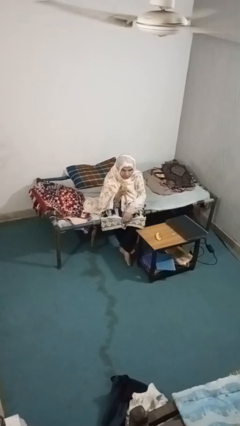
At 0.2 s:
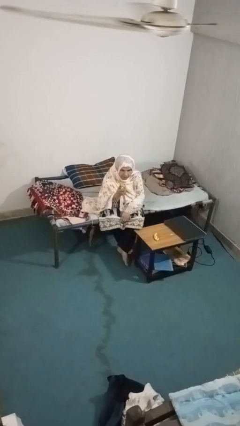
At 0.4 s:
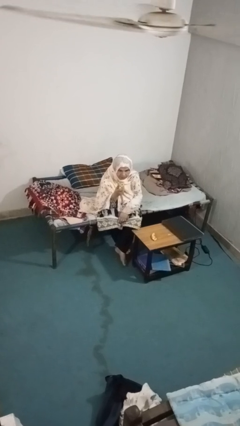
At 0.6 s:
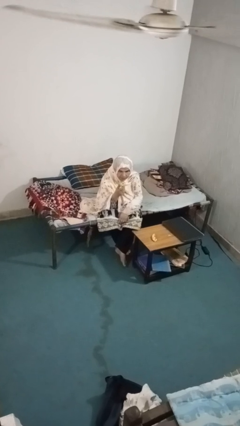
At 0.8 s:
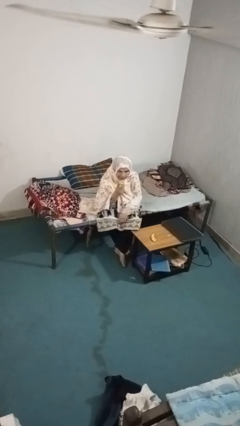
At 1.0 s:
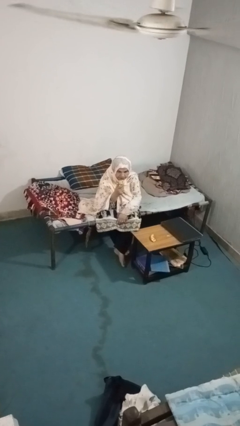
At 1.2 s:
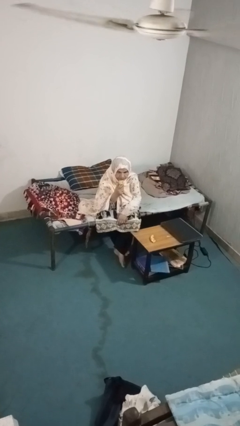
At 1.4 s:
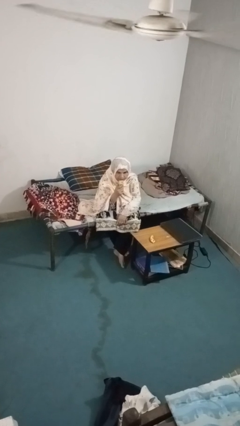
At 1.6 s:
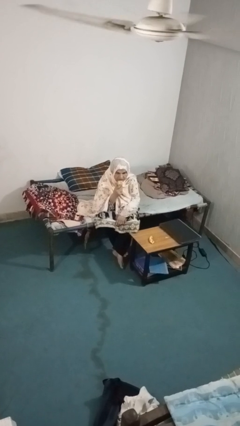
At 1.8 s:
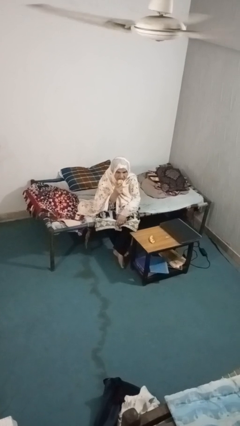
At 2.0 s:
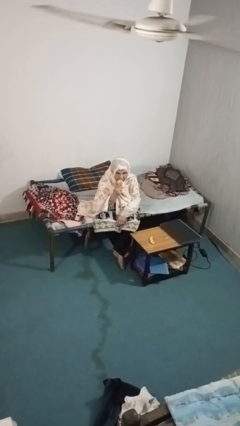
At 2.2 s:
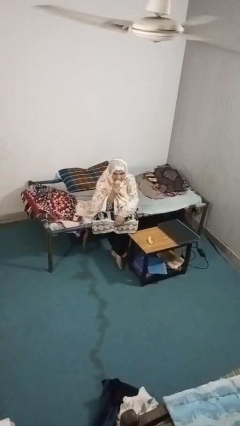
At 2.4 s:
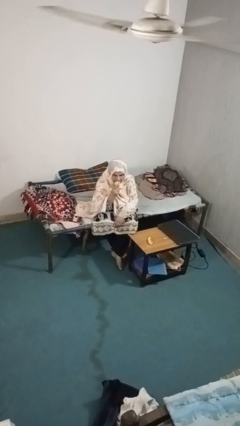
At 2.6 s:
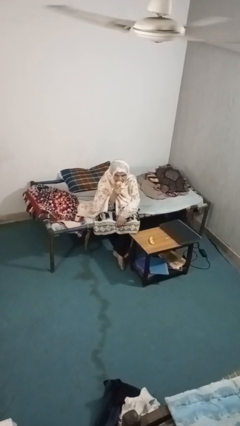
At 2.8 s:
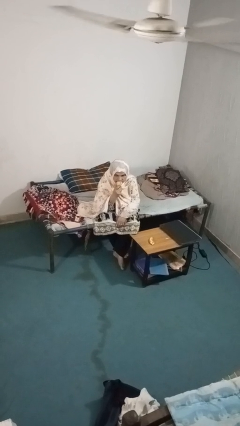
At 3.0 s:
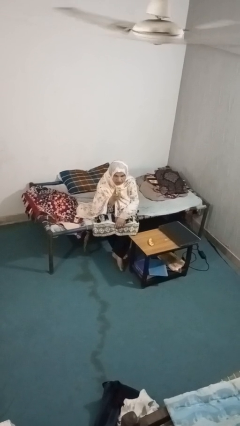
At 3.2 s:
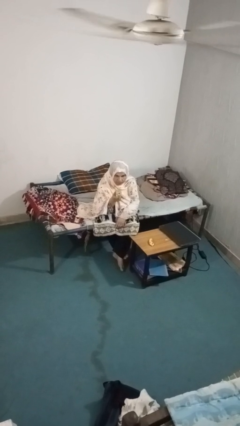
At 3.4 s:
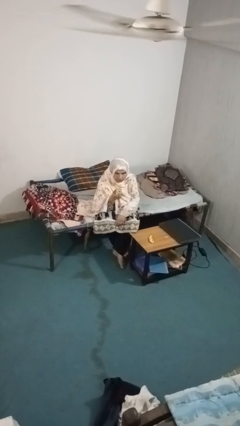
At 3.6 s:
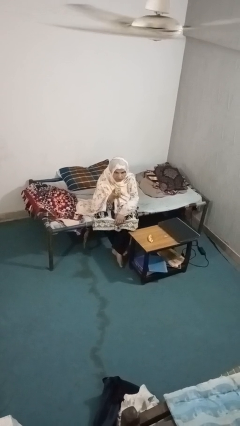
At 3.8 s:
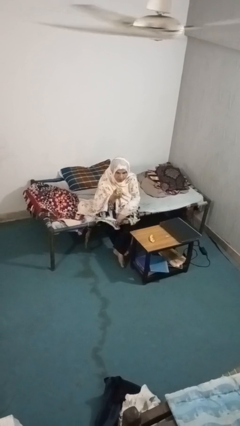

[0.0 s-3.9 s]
person eats apple

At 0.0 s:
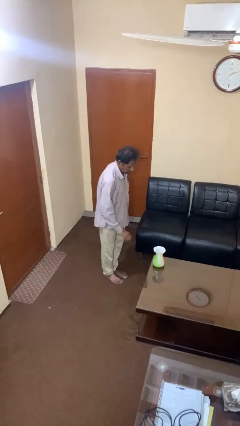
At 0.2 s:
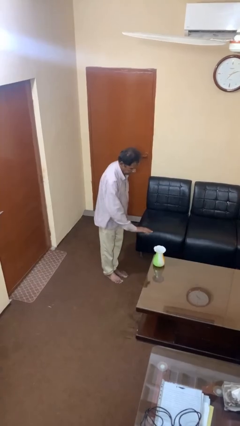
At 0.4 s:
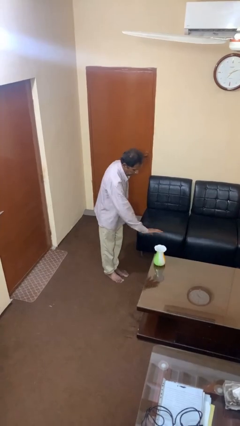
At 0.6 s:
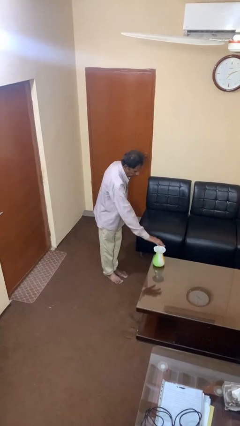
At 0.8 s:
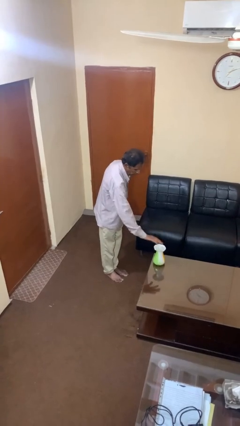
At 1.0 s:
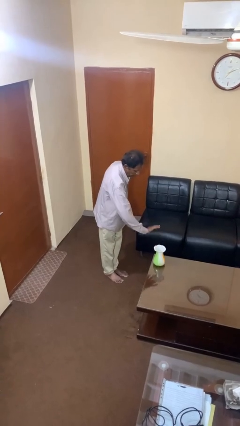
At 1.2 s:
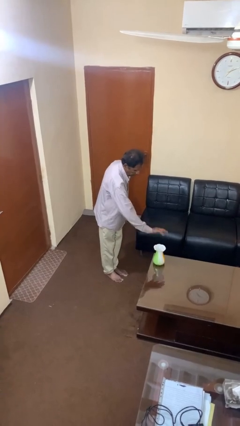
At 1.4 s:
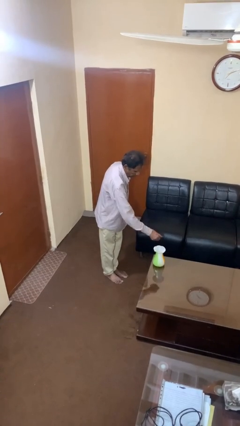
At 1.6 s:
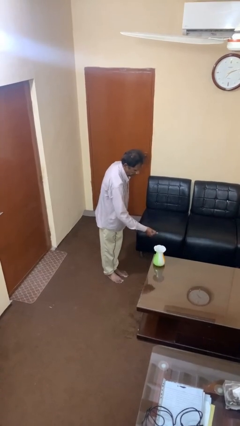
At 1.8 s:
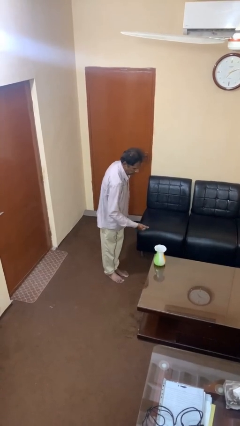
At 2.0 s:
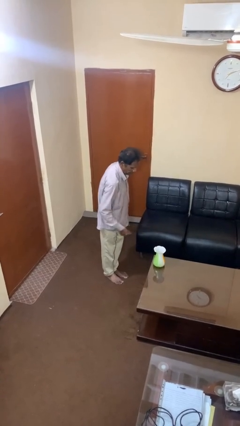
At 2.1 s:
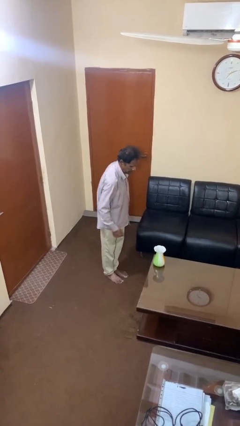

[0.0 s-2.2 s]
person waves hand over object

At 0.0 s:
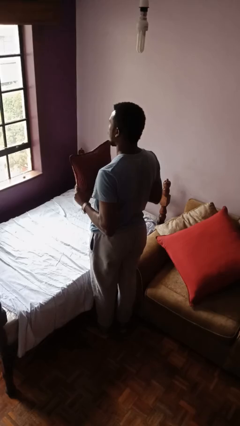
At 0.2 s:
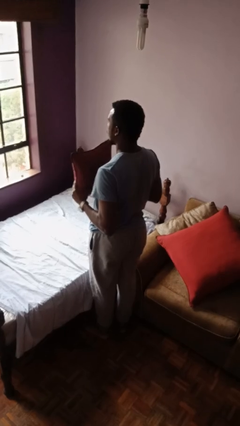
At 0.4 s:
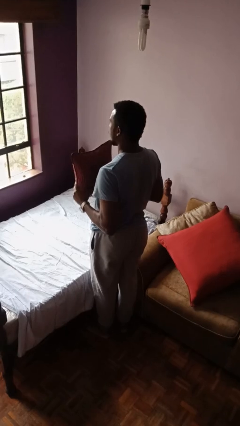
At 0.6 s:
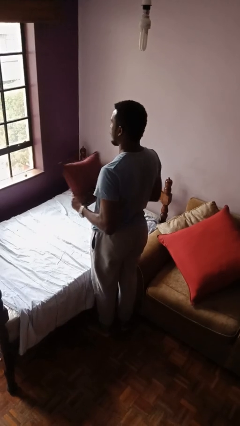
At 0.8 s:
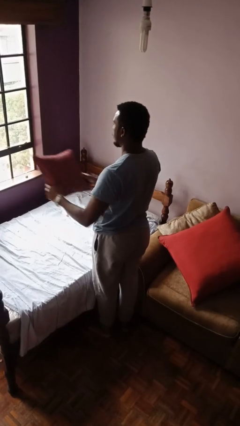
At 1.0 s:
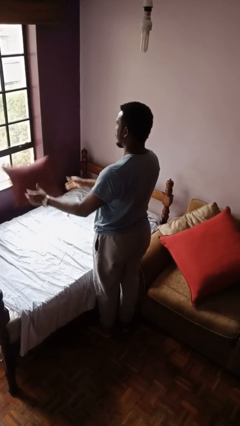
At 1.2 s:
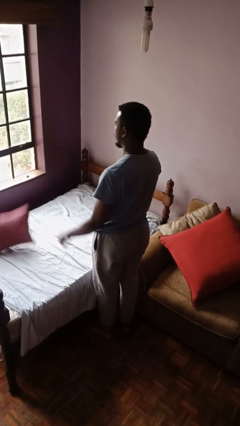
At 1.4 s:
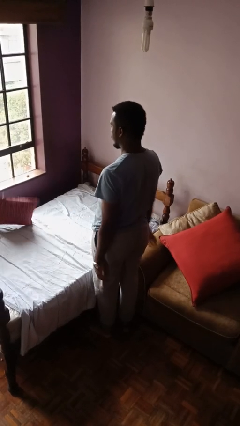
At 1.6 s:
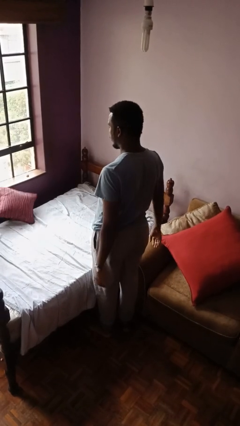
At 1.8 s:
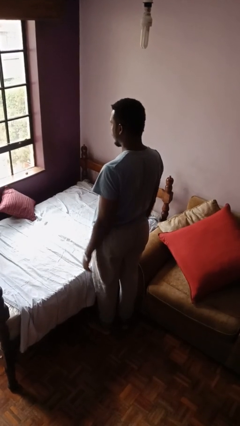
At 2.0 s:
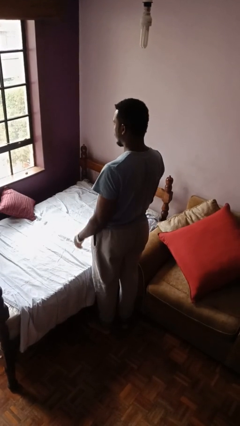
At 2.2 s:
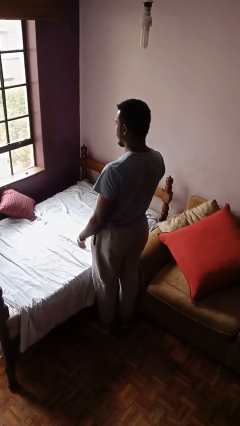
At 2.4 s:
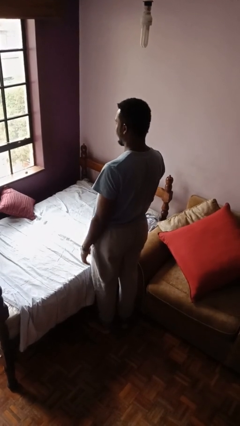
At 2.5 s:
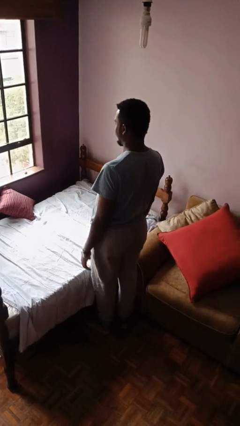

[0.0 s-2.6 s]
person throws object on bed

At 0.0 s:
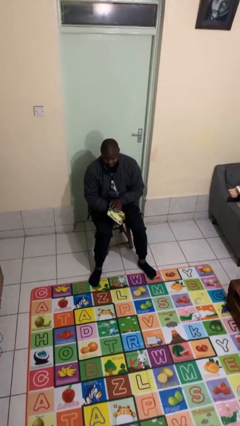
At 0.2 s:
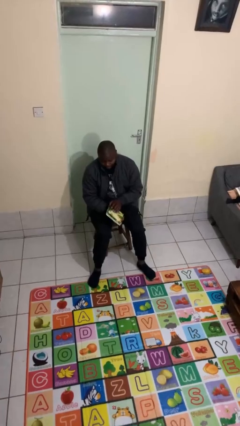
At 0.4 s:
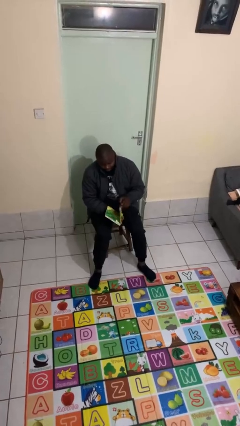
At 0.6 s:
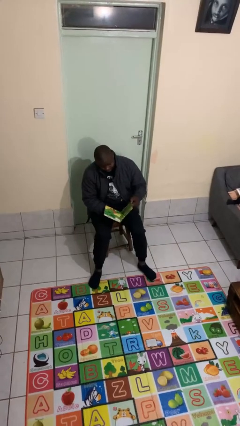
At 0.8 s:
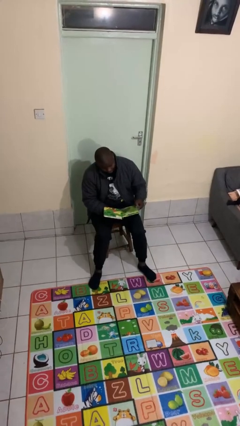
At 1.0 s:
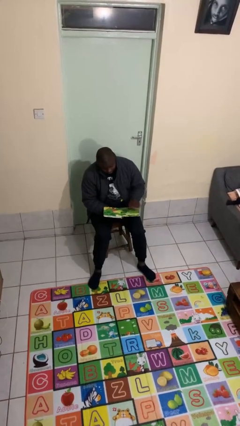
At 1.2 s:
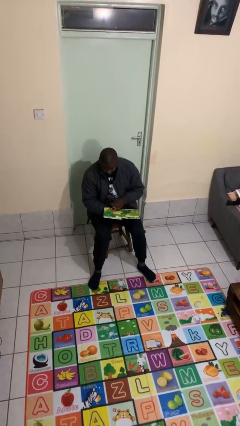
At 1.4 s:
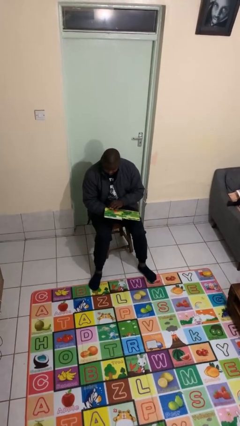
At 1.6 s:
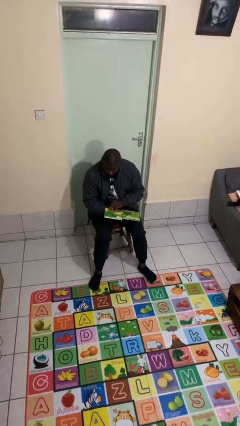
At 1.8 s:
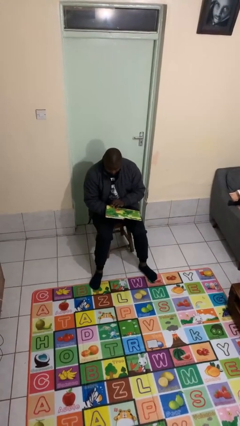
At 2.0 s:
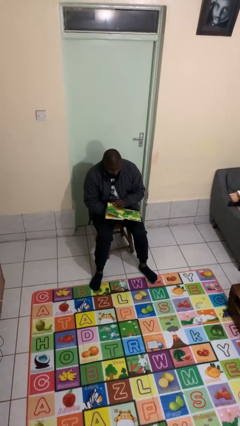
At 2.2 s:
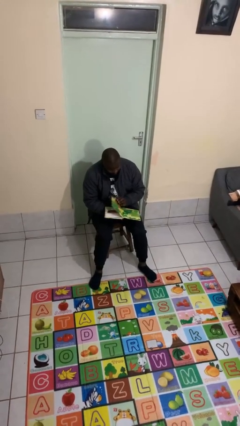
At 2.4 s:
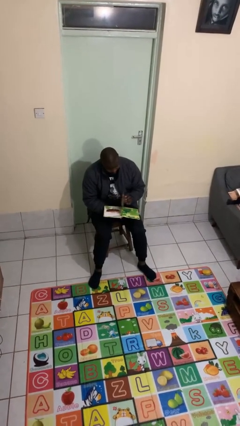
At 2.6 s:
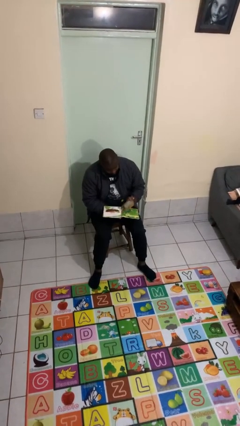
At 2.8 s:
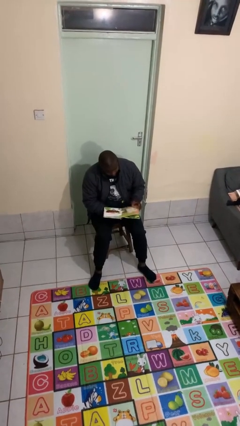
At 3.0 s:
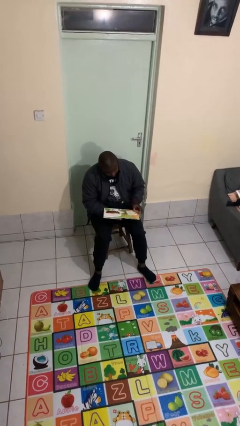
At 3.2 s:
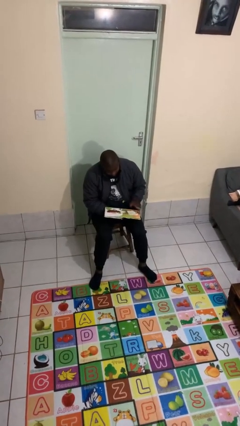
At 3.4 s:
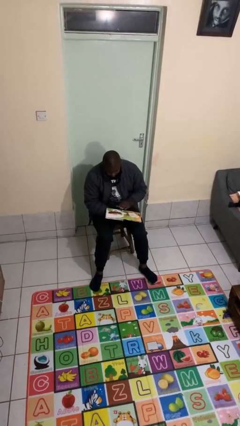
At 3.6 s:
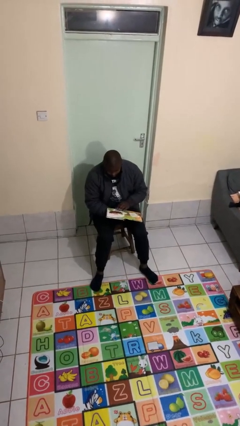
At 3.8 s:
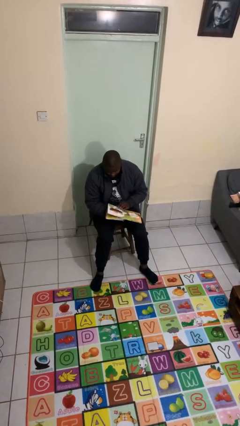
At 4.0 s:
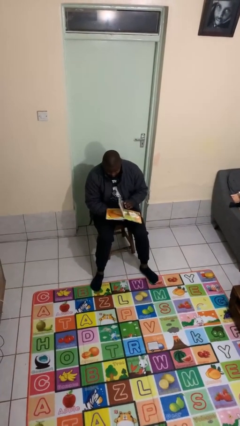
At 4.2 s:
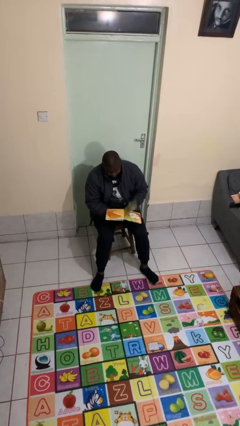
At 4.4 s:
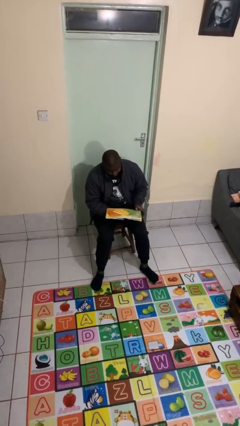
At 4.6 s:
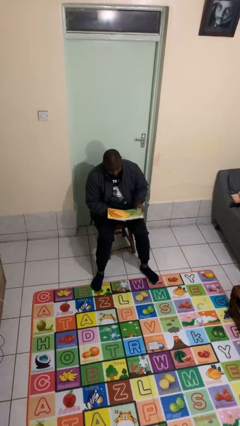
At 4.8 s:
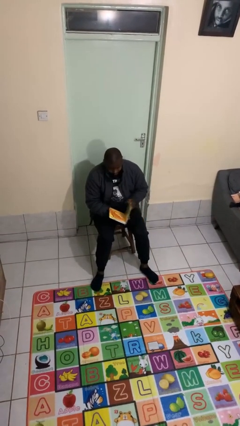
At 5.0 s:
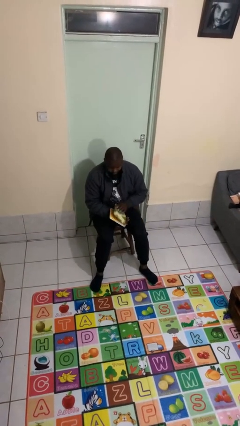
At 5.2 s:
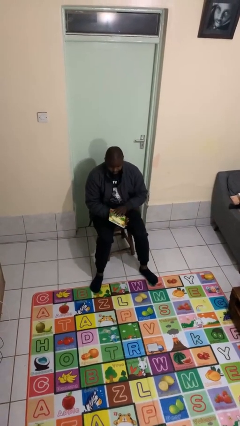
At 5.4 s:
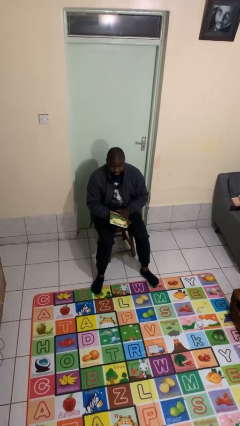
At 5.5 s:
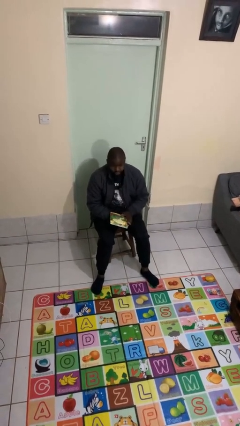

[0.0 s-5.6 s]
person reads book

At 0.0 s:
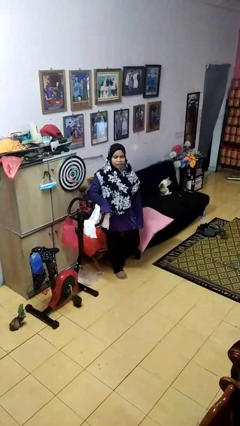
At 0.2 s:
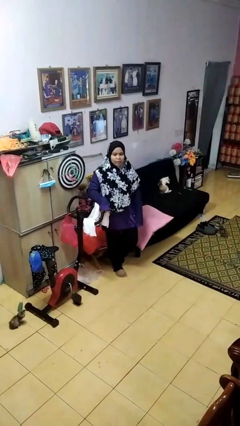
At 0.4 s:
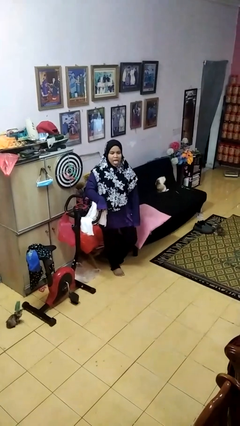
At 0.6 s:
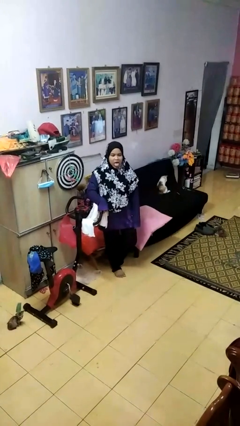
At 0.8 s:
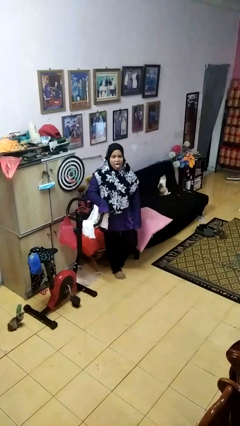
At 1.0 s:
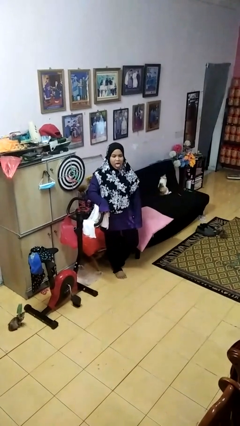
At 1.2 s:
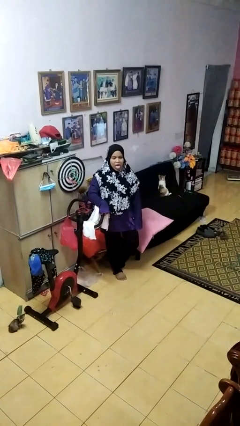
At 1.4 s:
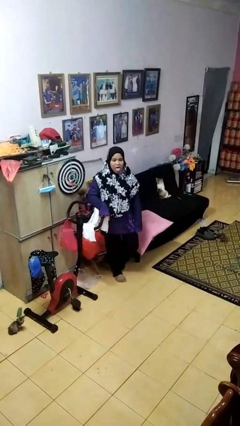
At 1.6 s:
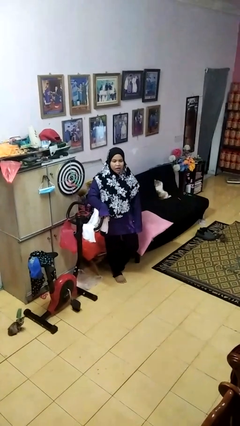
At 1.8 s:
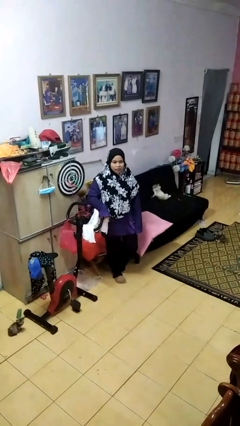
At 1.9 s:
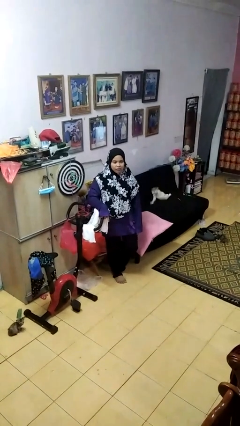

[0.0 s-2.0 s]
person sticks out tongue

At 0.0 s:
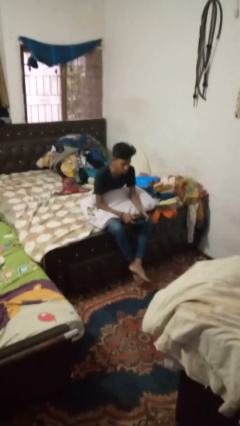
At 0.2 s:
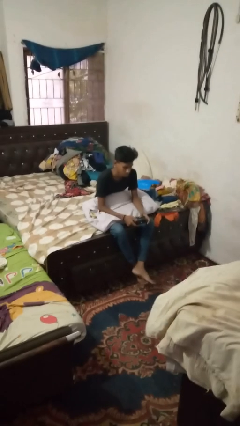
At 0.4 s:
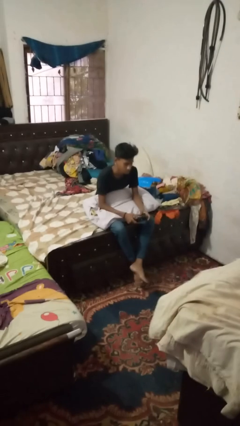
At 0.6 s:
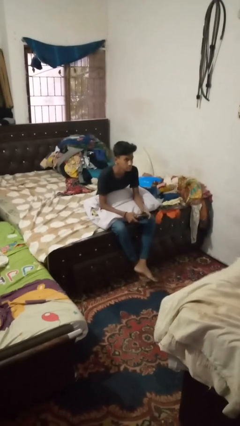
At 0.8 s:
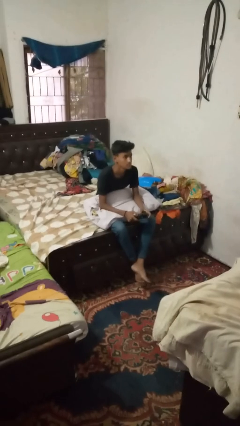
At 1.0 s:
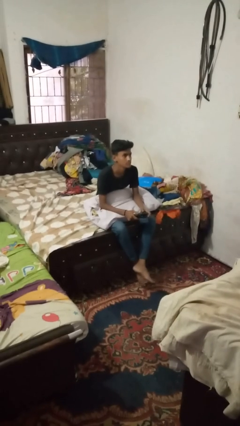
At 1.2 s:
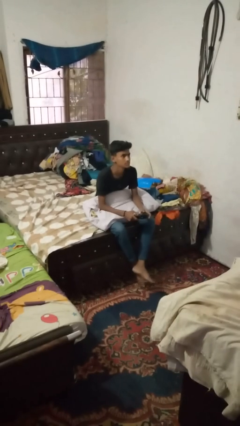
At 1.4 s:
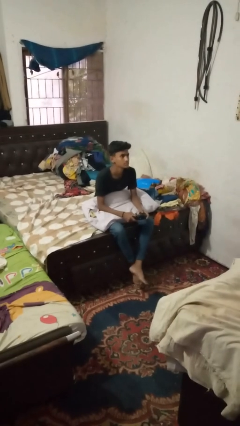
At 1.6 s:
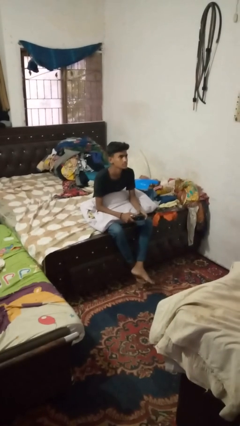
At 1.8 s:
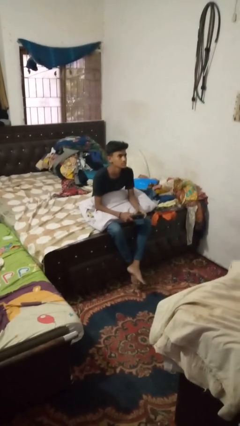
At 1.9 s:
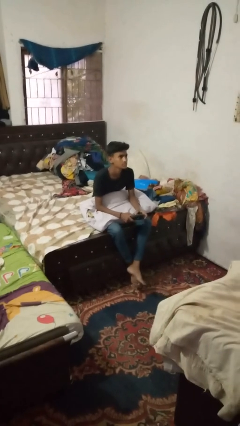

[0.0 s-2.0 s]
person interacts with handheld game
